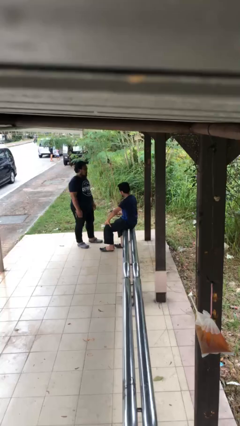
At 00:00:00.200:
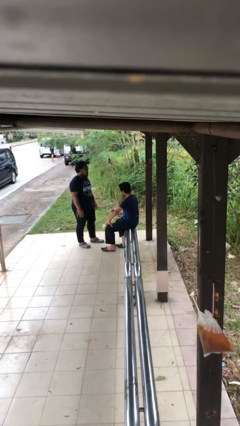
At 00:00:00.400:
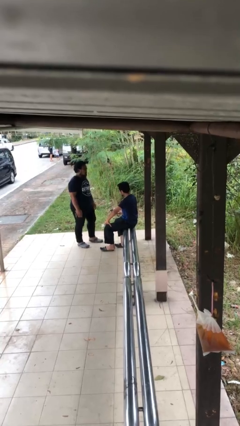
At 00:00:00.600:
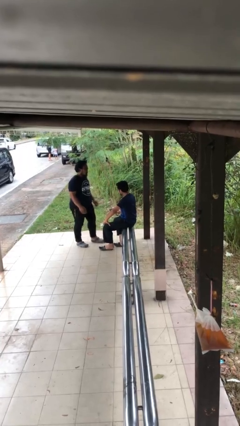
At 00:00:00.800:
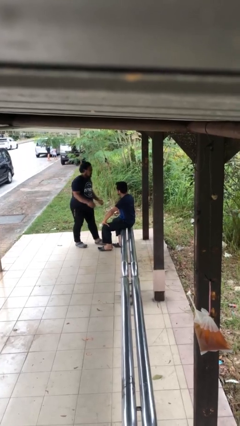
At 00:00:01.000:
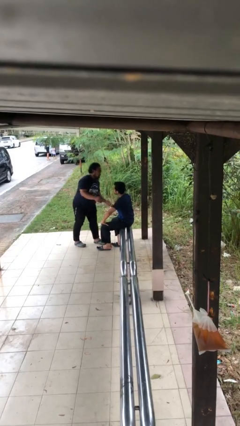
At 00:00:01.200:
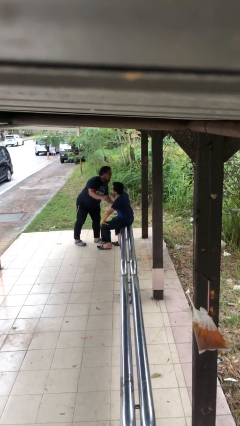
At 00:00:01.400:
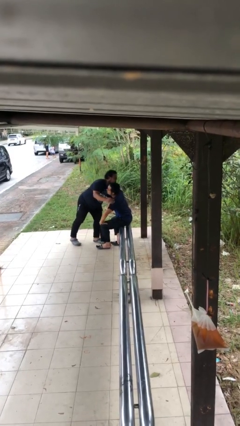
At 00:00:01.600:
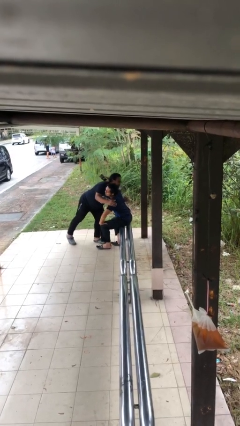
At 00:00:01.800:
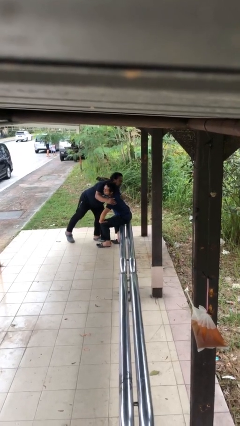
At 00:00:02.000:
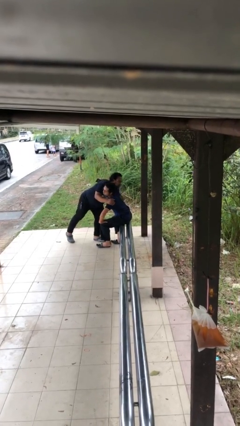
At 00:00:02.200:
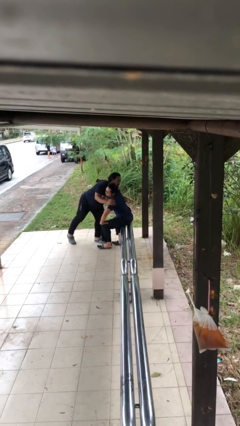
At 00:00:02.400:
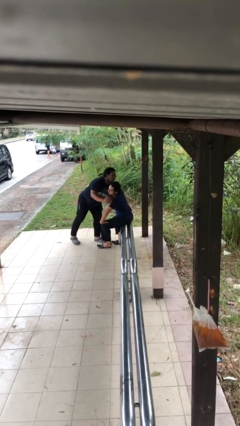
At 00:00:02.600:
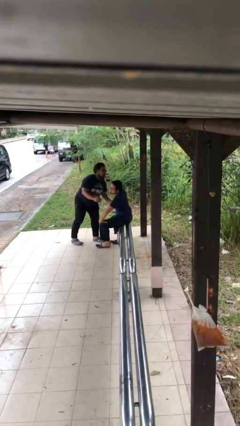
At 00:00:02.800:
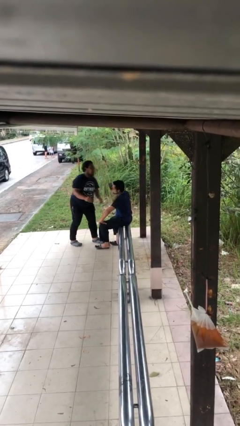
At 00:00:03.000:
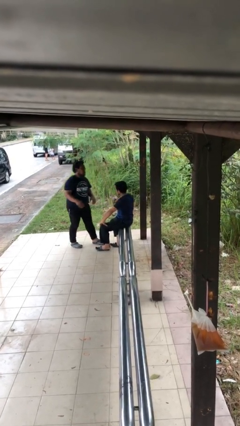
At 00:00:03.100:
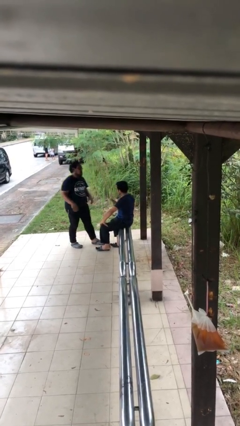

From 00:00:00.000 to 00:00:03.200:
person embraces person

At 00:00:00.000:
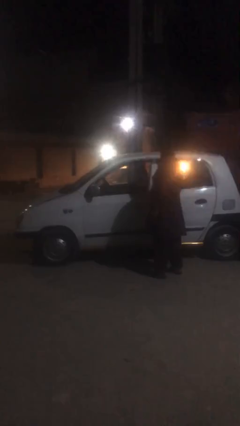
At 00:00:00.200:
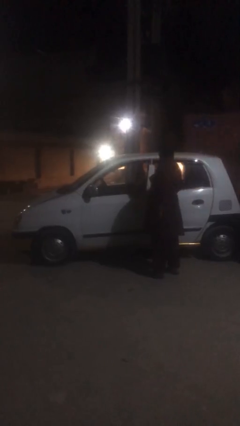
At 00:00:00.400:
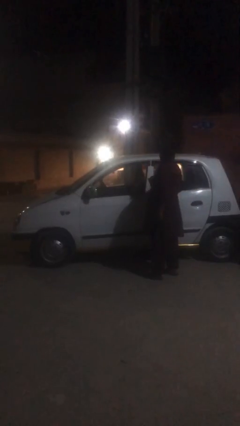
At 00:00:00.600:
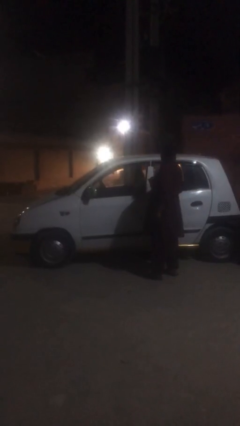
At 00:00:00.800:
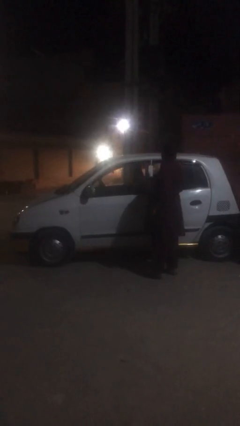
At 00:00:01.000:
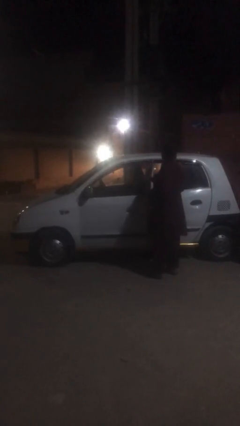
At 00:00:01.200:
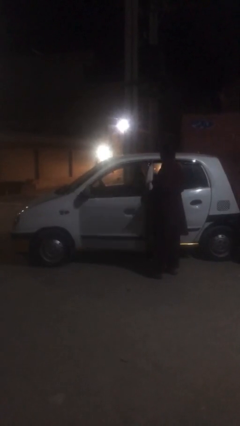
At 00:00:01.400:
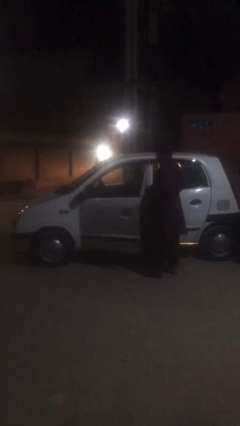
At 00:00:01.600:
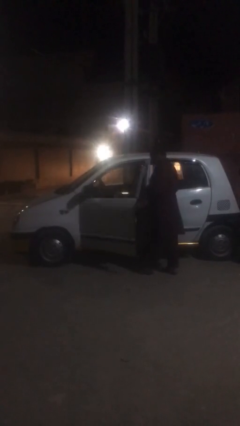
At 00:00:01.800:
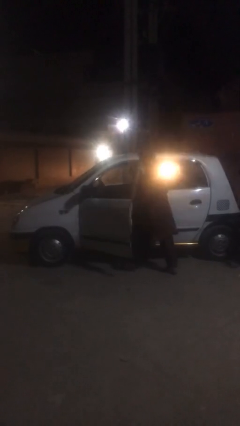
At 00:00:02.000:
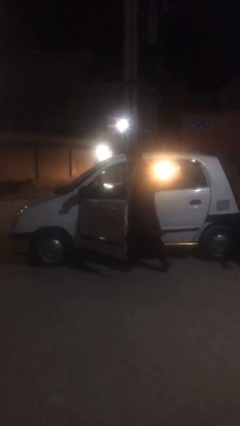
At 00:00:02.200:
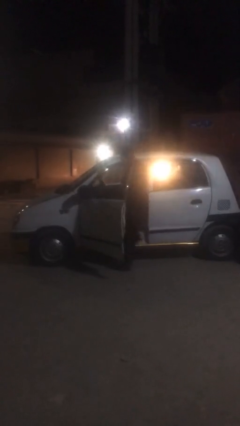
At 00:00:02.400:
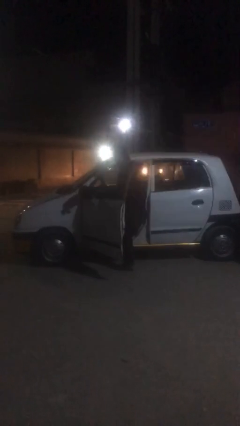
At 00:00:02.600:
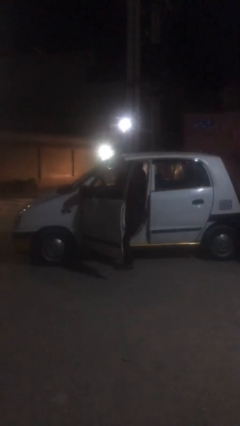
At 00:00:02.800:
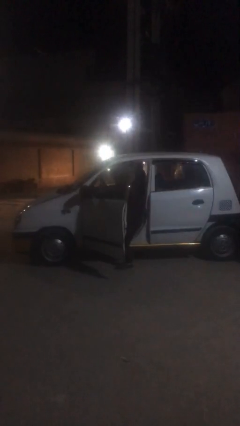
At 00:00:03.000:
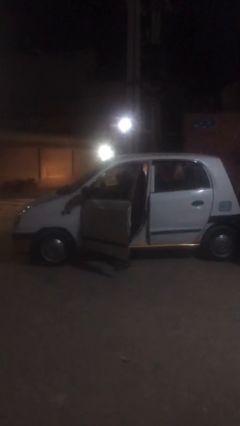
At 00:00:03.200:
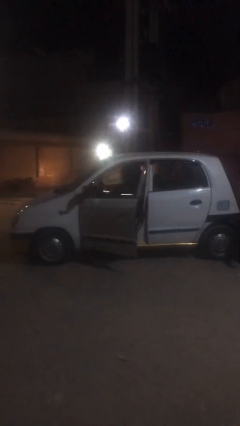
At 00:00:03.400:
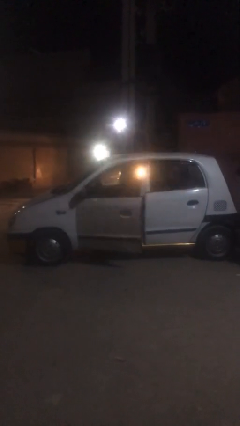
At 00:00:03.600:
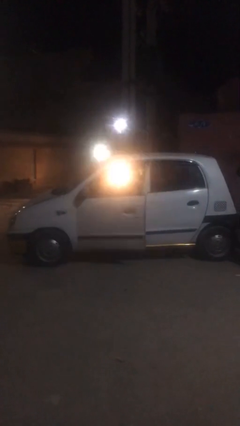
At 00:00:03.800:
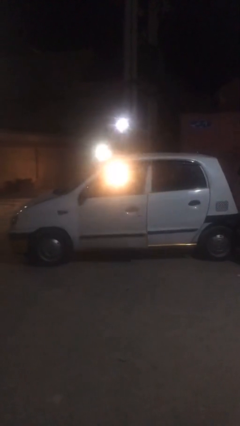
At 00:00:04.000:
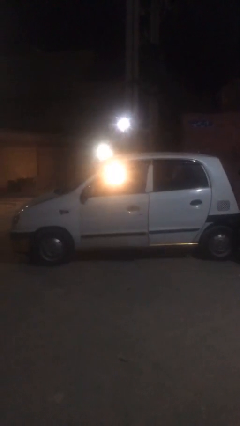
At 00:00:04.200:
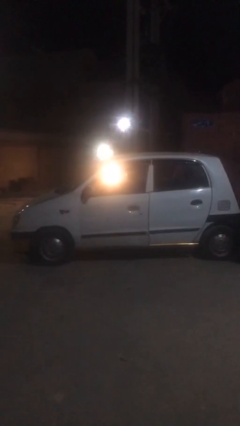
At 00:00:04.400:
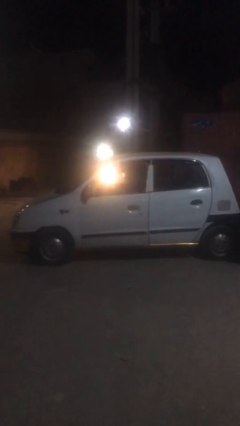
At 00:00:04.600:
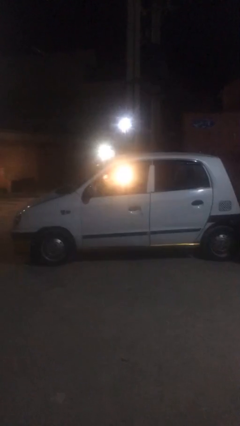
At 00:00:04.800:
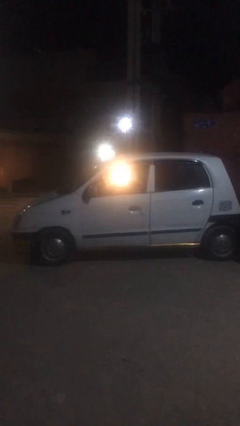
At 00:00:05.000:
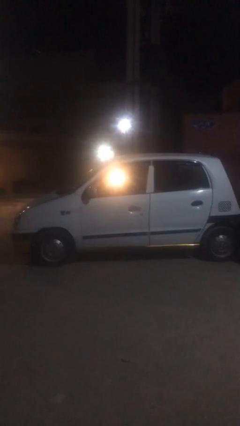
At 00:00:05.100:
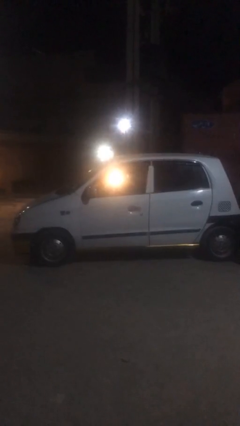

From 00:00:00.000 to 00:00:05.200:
car picks up person

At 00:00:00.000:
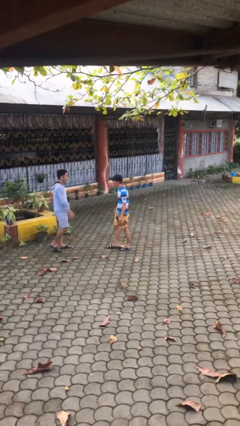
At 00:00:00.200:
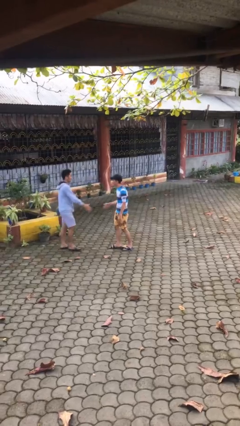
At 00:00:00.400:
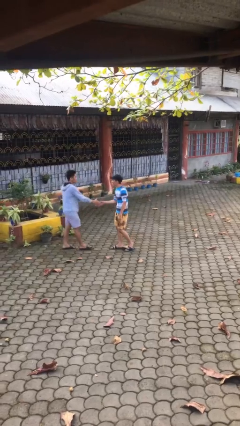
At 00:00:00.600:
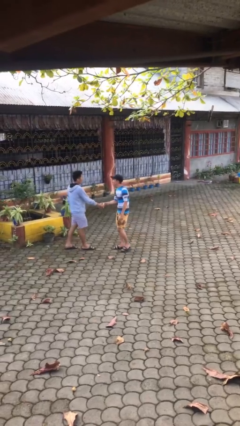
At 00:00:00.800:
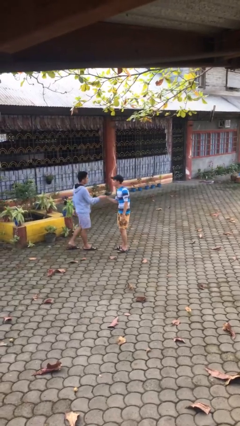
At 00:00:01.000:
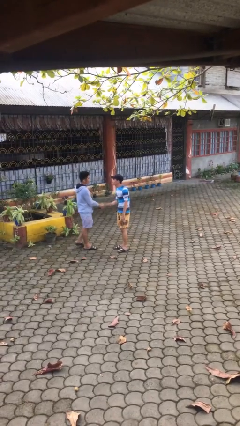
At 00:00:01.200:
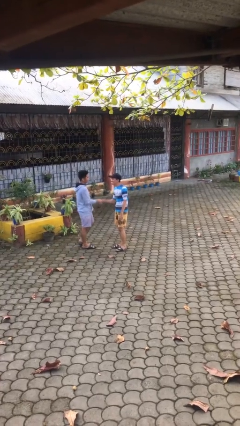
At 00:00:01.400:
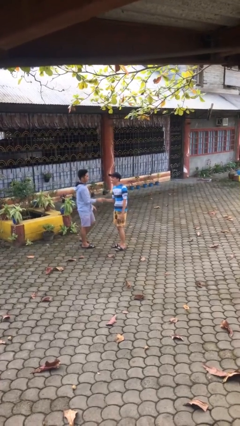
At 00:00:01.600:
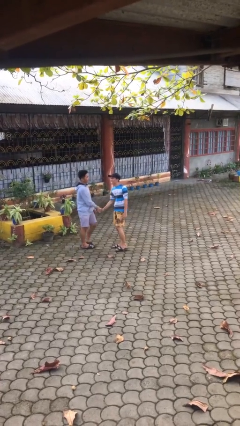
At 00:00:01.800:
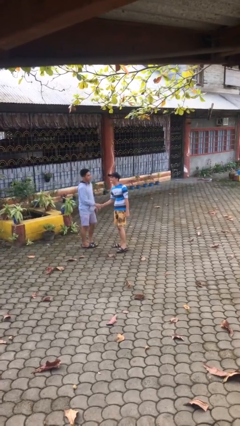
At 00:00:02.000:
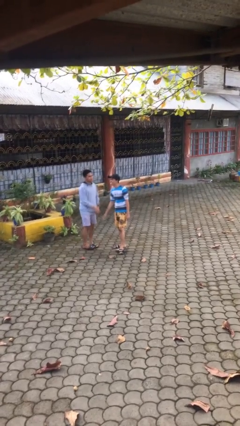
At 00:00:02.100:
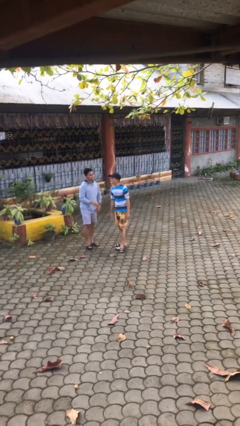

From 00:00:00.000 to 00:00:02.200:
person shakes hand

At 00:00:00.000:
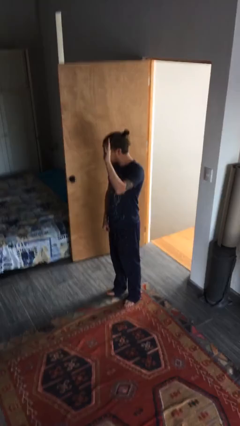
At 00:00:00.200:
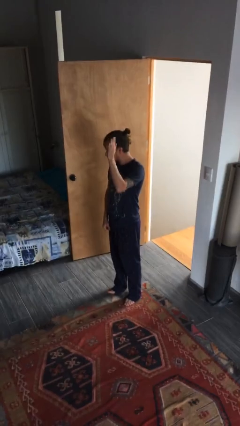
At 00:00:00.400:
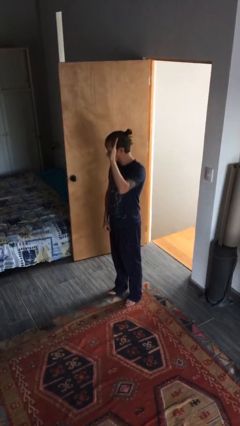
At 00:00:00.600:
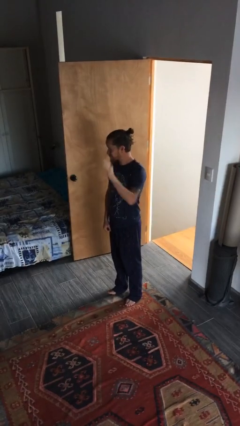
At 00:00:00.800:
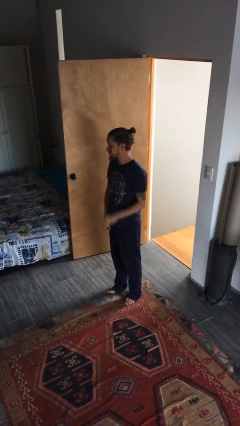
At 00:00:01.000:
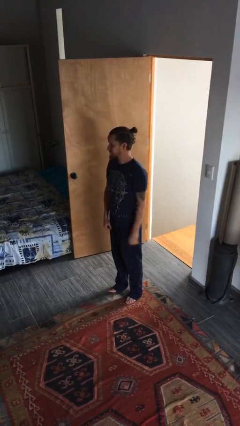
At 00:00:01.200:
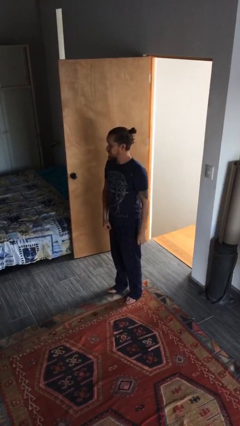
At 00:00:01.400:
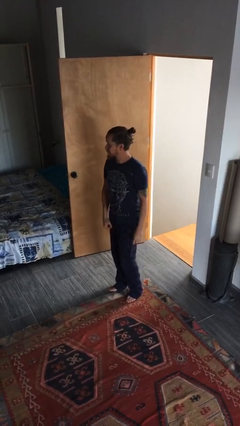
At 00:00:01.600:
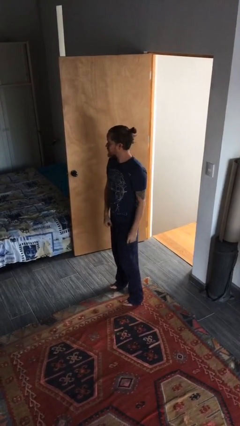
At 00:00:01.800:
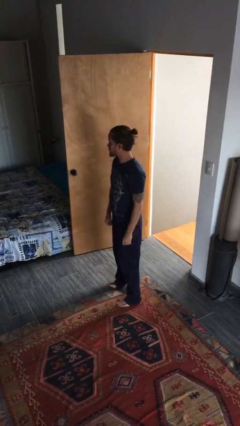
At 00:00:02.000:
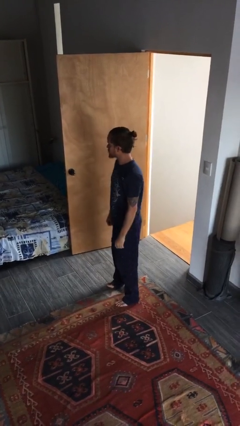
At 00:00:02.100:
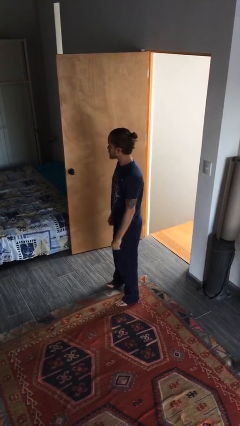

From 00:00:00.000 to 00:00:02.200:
person gestures lower hand

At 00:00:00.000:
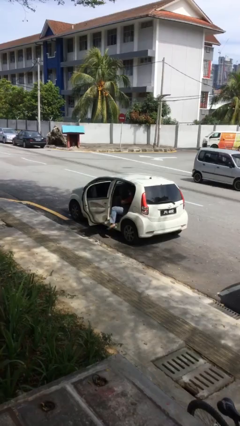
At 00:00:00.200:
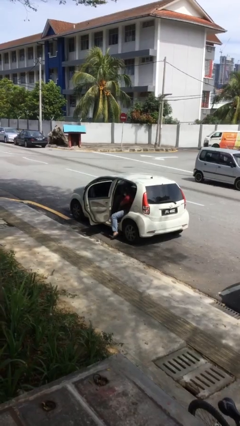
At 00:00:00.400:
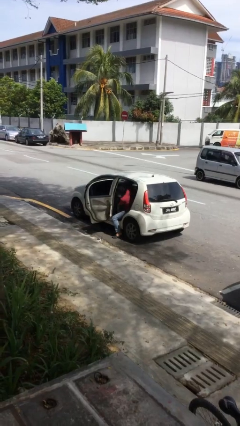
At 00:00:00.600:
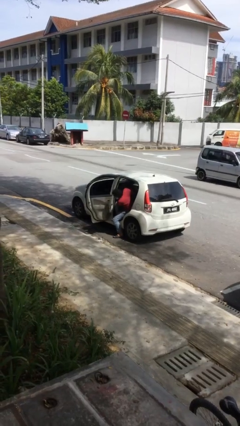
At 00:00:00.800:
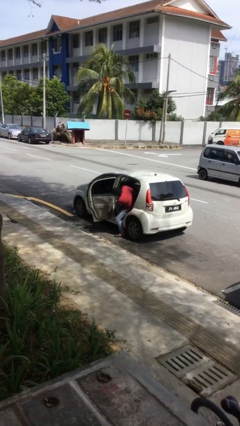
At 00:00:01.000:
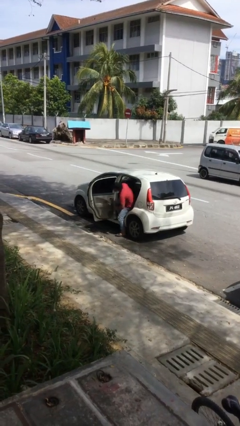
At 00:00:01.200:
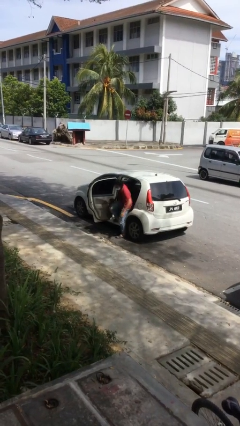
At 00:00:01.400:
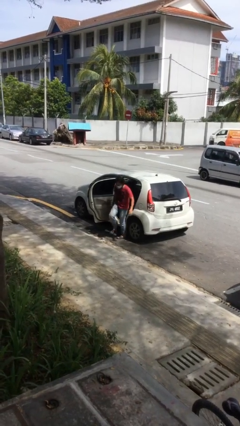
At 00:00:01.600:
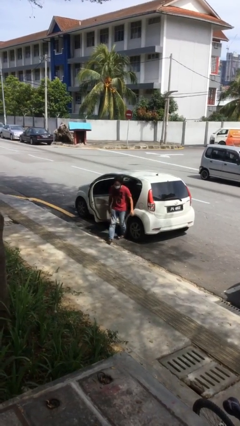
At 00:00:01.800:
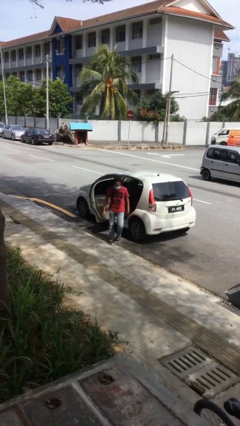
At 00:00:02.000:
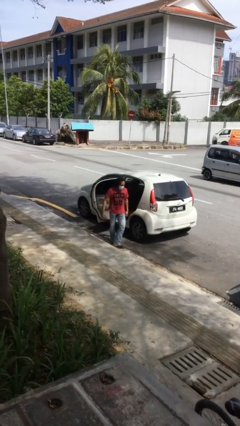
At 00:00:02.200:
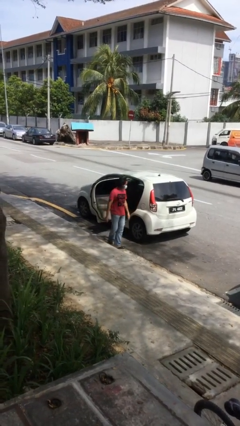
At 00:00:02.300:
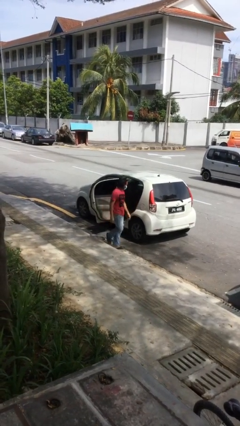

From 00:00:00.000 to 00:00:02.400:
person exits car

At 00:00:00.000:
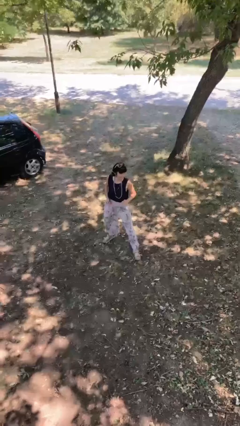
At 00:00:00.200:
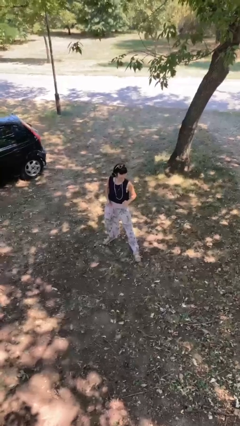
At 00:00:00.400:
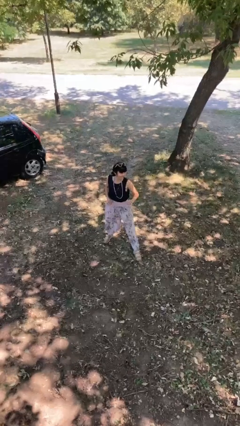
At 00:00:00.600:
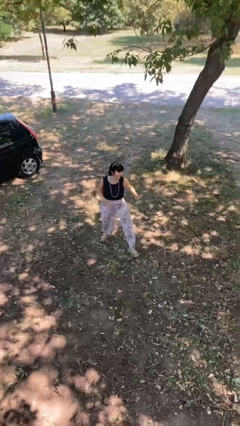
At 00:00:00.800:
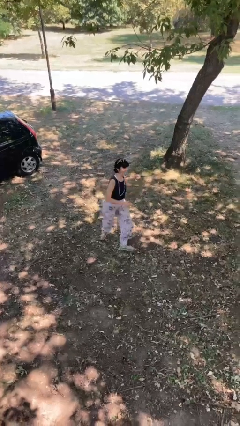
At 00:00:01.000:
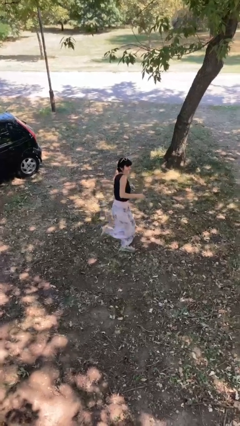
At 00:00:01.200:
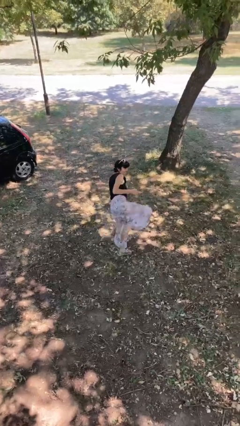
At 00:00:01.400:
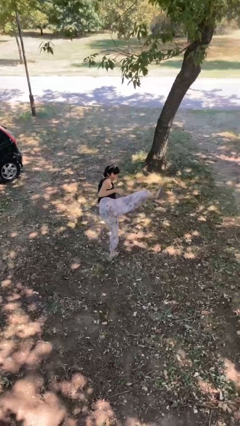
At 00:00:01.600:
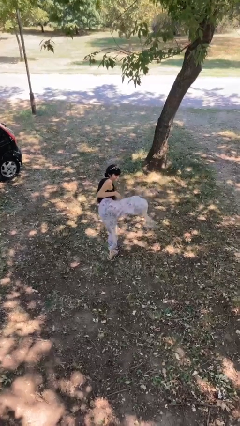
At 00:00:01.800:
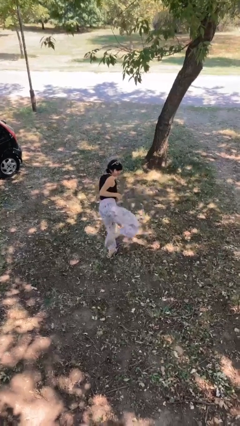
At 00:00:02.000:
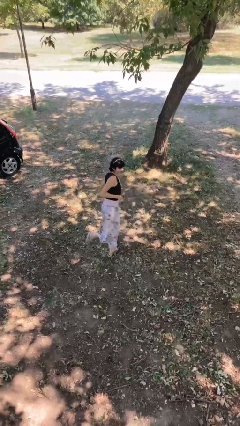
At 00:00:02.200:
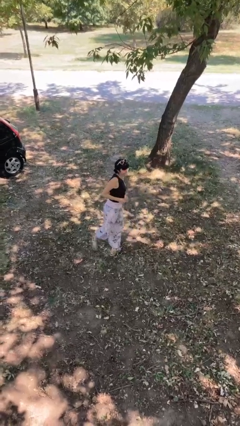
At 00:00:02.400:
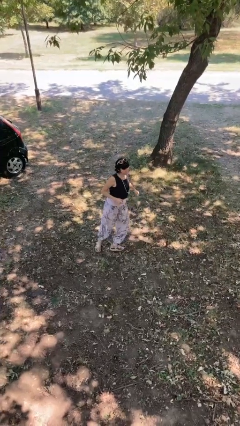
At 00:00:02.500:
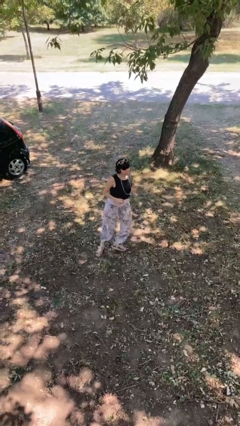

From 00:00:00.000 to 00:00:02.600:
person karate kicks
